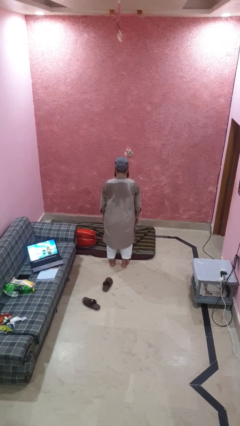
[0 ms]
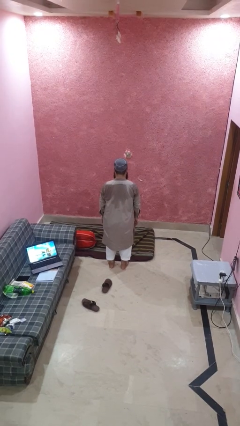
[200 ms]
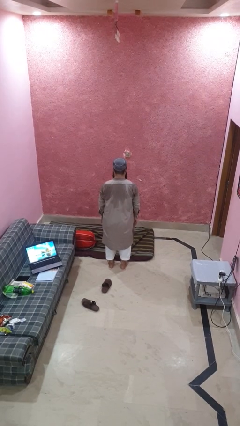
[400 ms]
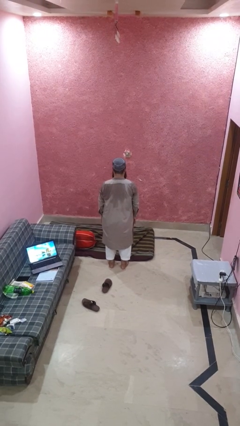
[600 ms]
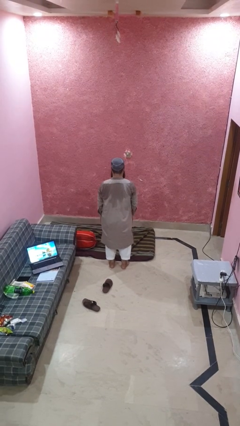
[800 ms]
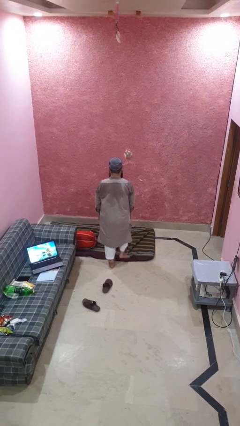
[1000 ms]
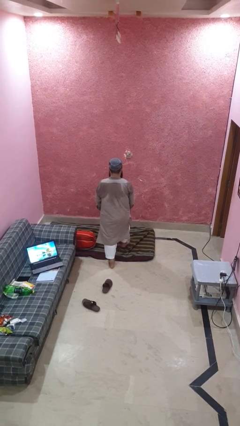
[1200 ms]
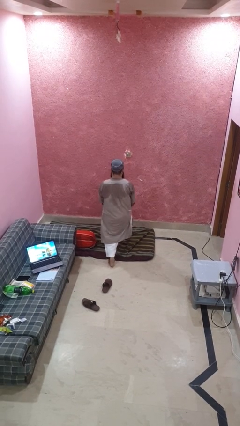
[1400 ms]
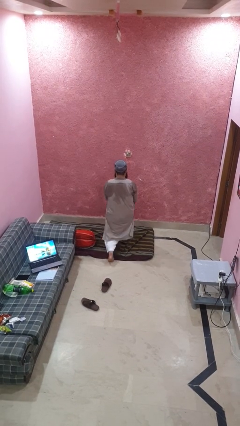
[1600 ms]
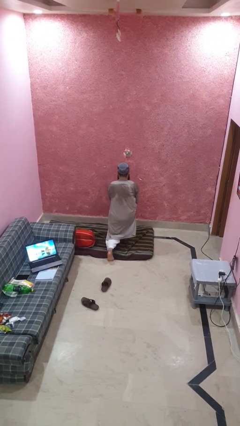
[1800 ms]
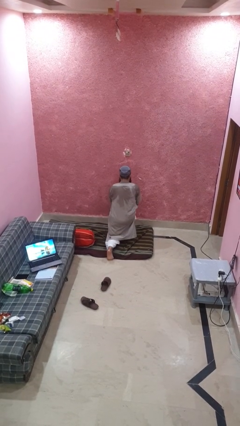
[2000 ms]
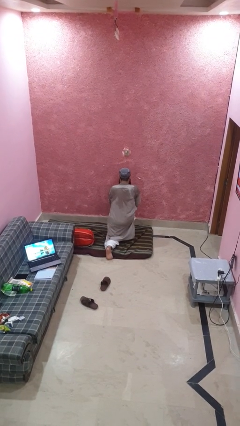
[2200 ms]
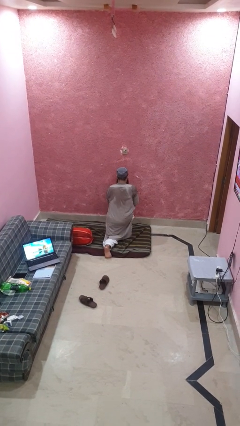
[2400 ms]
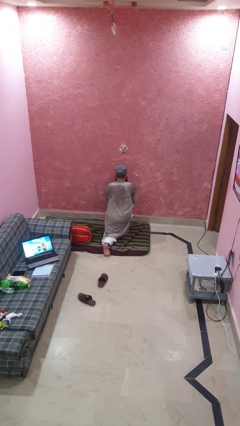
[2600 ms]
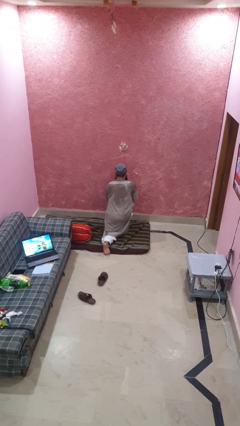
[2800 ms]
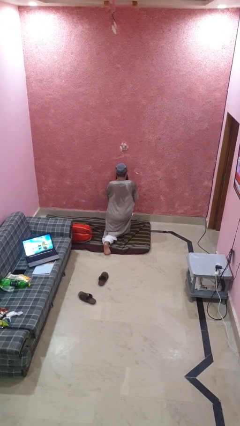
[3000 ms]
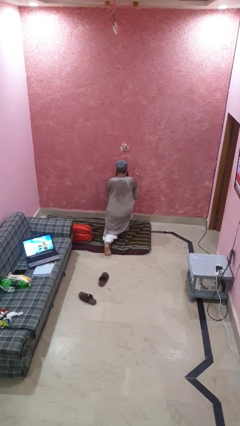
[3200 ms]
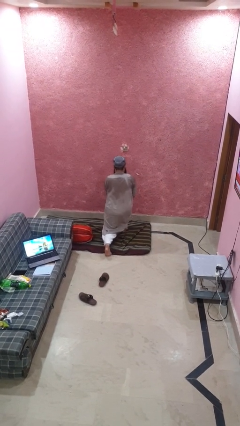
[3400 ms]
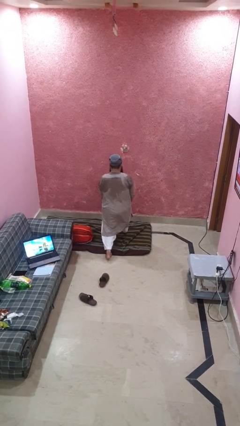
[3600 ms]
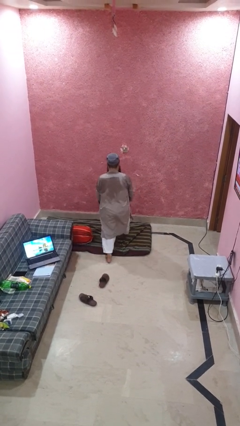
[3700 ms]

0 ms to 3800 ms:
person exercises with lunges

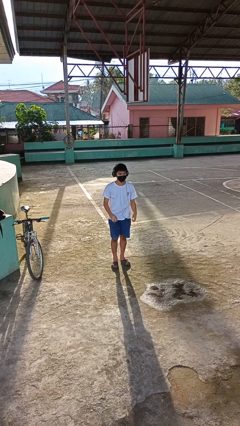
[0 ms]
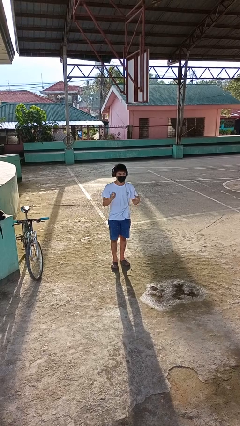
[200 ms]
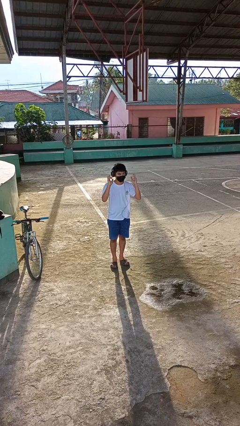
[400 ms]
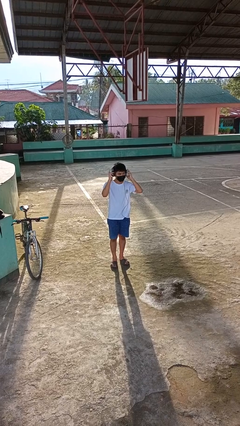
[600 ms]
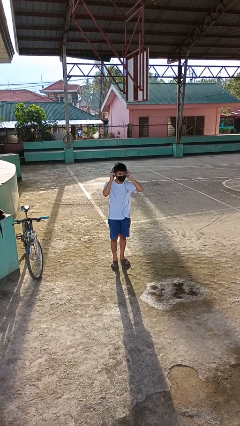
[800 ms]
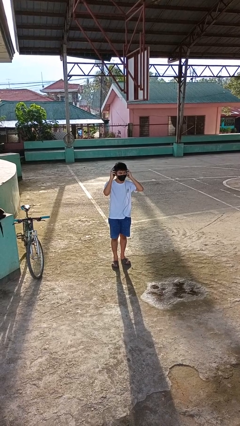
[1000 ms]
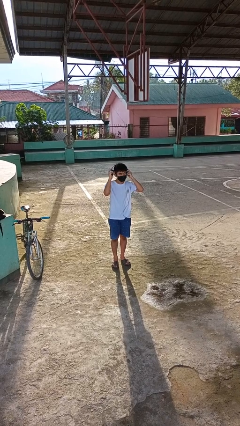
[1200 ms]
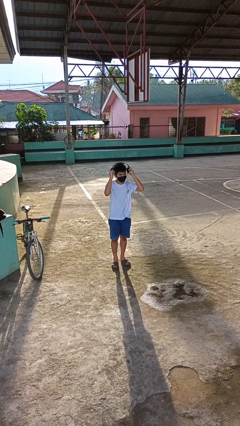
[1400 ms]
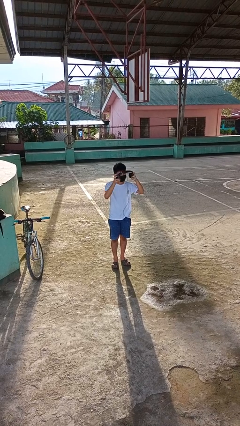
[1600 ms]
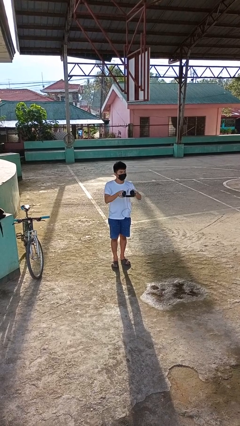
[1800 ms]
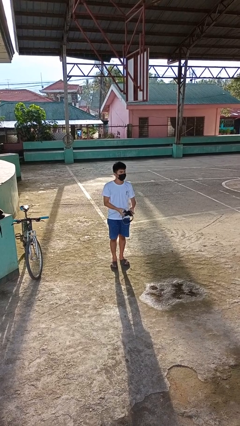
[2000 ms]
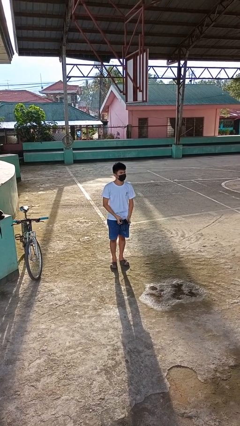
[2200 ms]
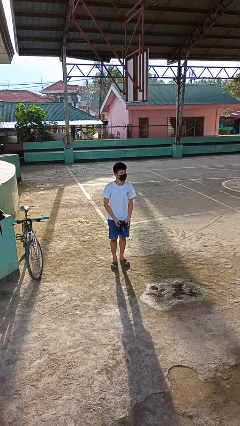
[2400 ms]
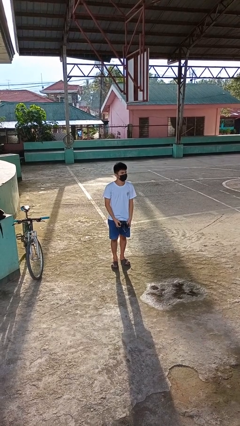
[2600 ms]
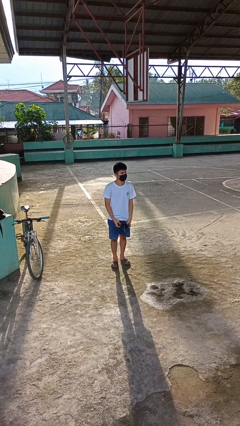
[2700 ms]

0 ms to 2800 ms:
person takes off headphones

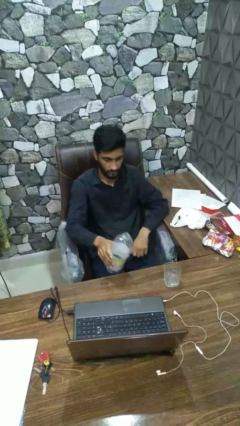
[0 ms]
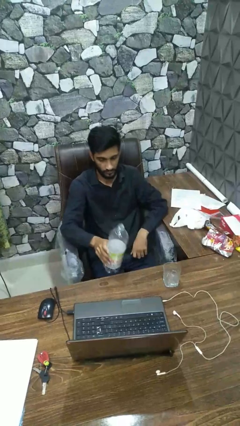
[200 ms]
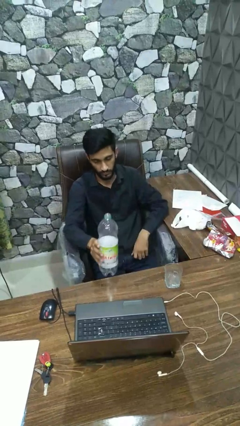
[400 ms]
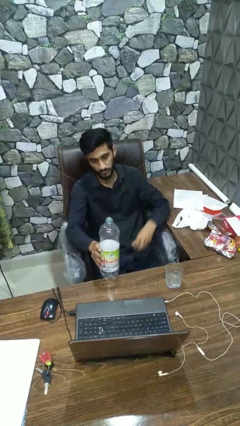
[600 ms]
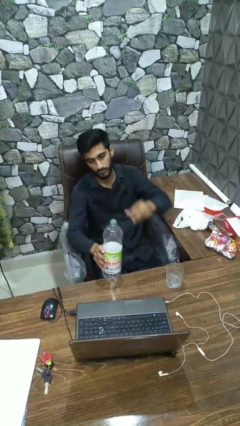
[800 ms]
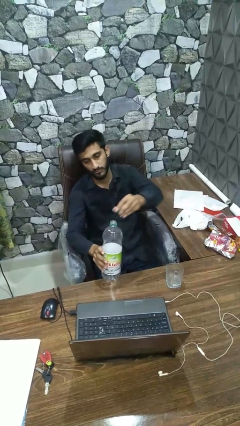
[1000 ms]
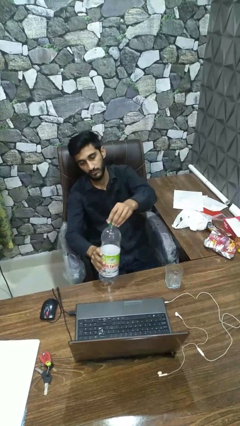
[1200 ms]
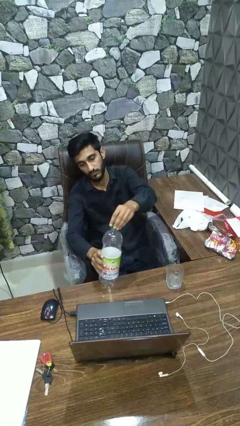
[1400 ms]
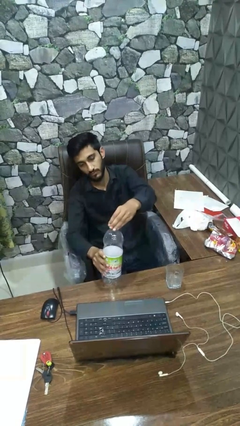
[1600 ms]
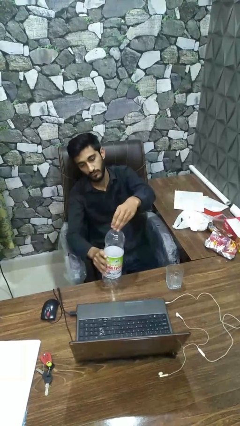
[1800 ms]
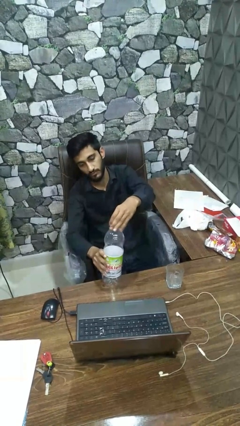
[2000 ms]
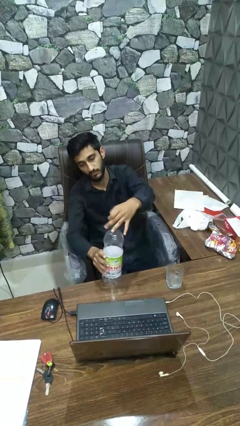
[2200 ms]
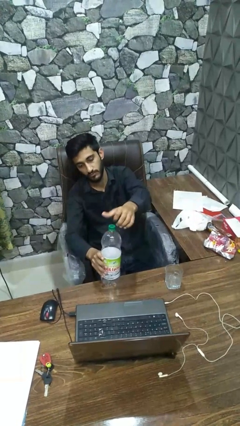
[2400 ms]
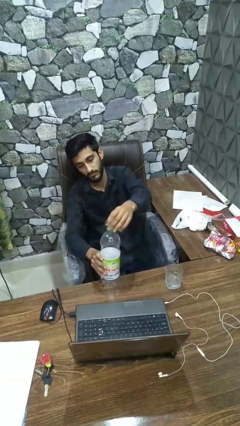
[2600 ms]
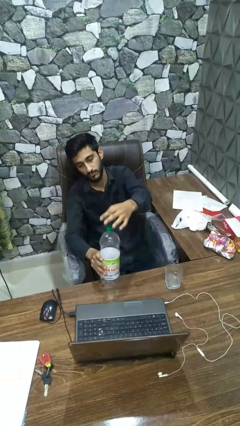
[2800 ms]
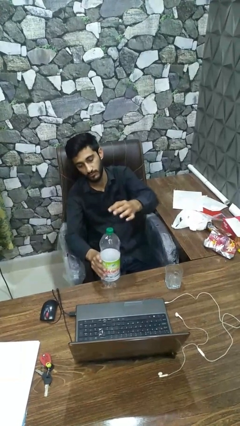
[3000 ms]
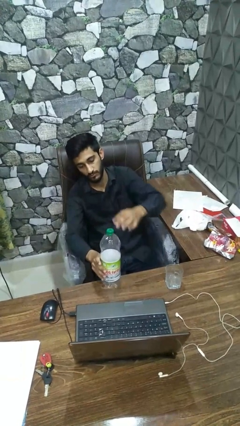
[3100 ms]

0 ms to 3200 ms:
person screws lid to bottle

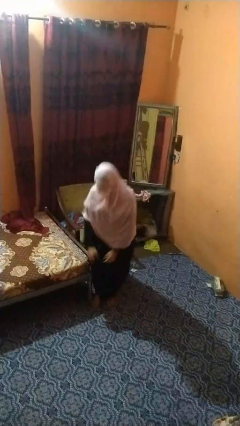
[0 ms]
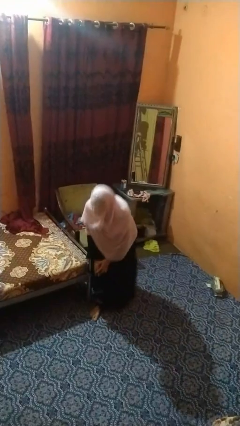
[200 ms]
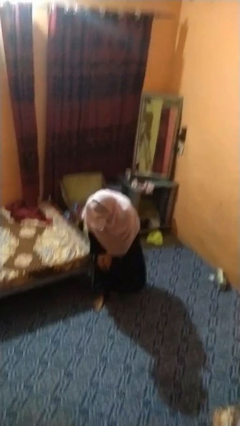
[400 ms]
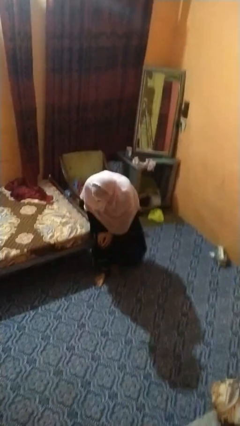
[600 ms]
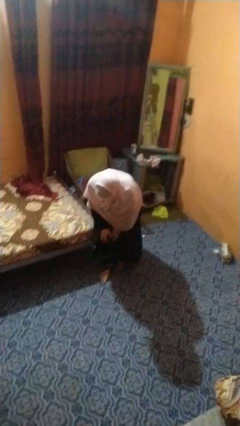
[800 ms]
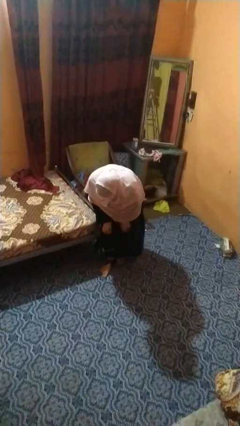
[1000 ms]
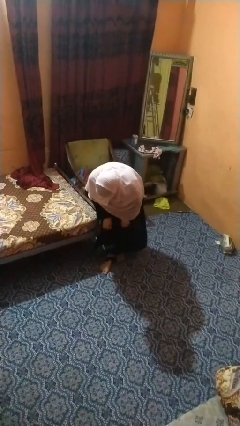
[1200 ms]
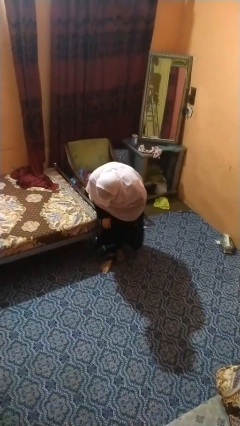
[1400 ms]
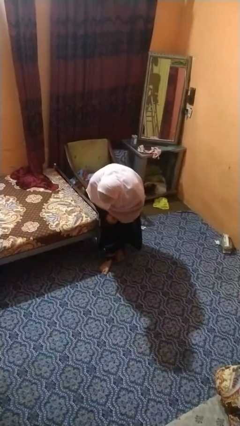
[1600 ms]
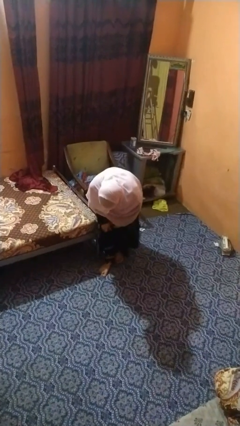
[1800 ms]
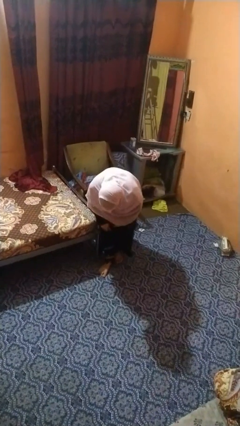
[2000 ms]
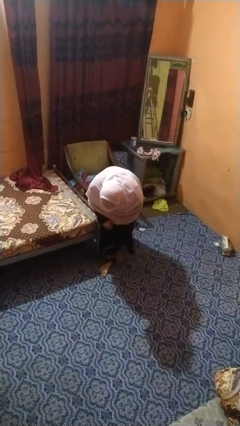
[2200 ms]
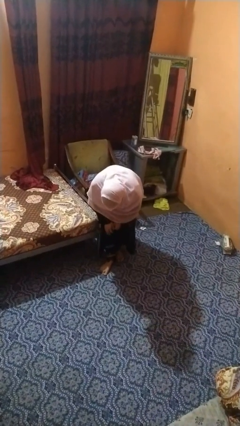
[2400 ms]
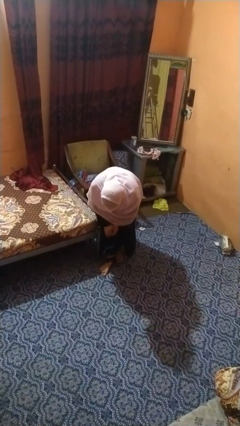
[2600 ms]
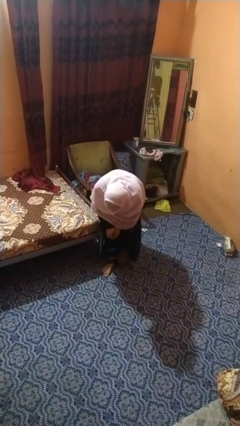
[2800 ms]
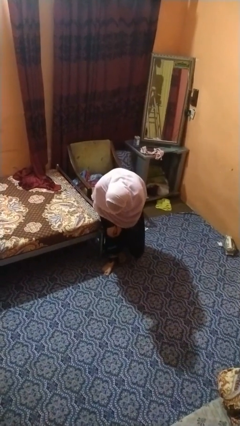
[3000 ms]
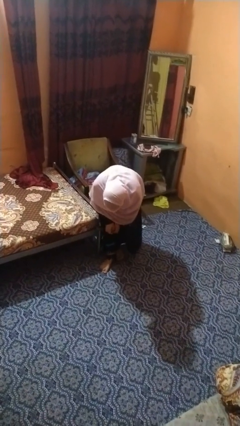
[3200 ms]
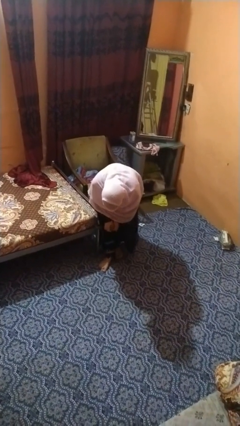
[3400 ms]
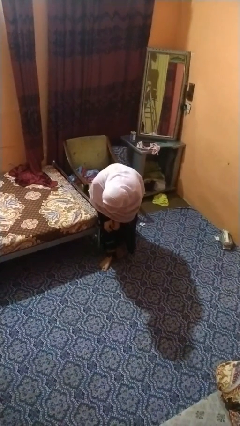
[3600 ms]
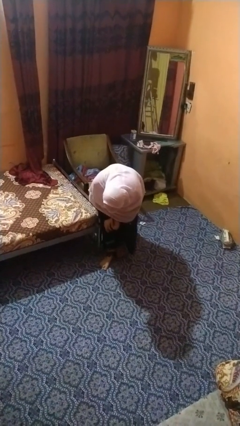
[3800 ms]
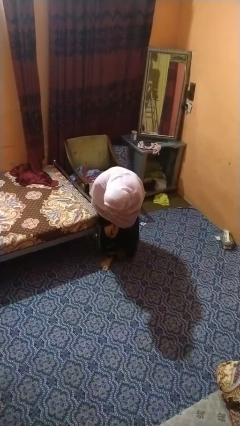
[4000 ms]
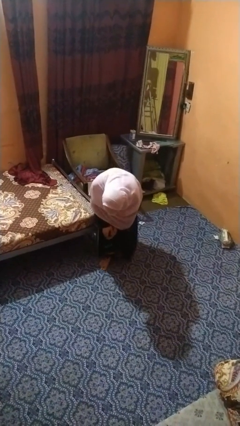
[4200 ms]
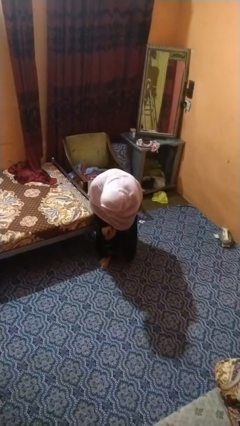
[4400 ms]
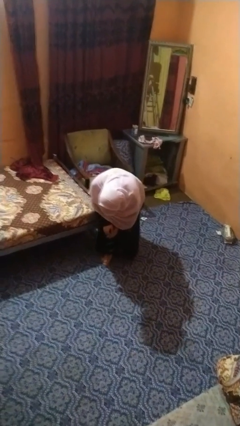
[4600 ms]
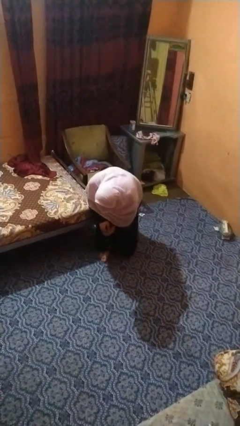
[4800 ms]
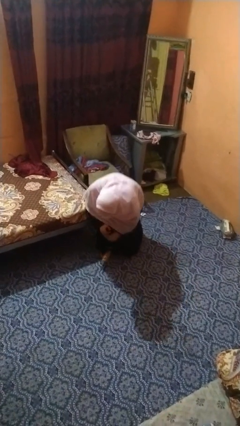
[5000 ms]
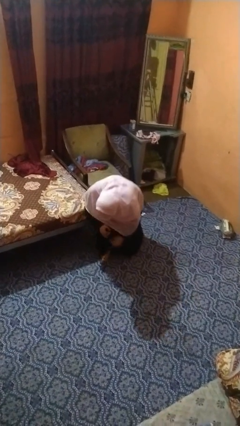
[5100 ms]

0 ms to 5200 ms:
person trips on object on floor

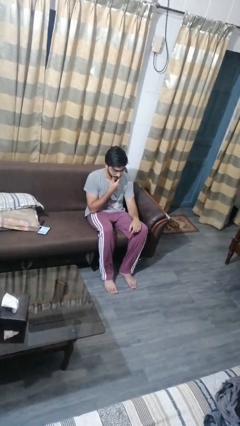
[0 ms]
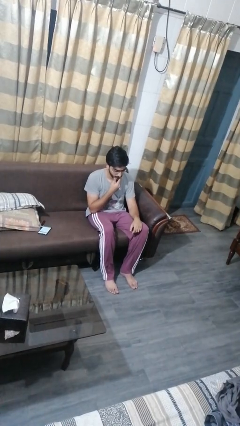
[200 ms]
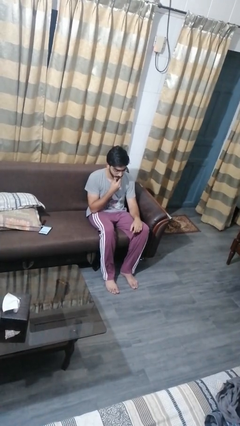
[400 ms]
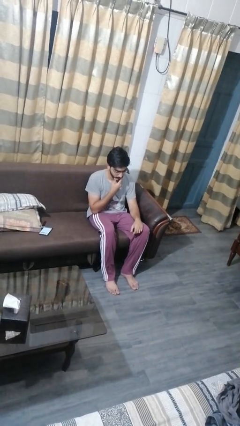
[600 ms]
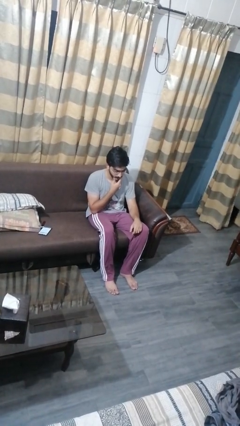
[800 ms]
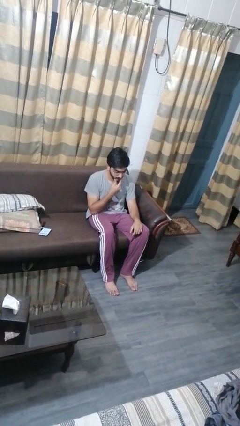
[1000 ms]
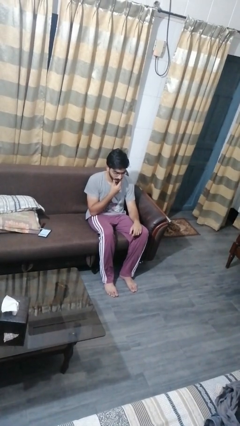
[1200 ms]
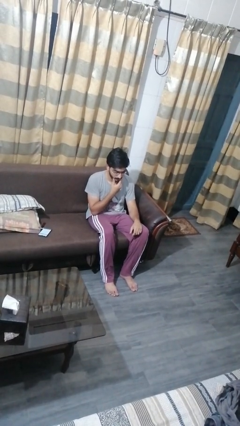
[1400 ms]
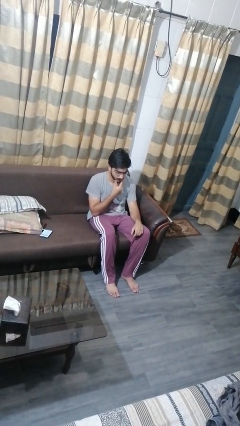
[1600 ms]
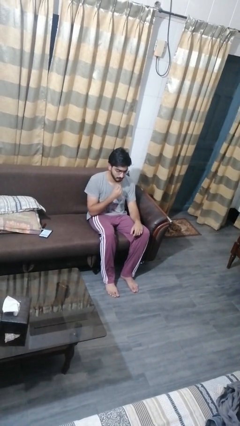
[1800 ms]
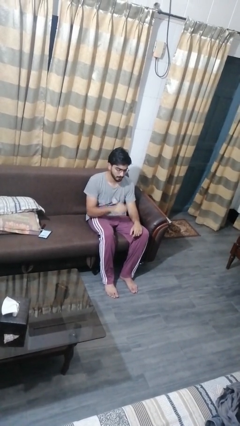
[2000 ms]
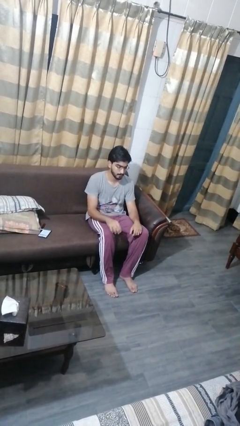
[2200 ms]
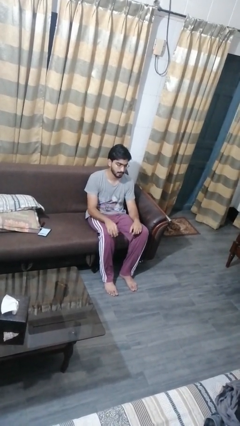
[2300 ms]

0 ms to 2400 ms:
person strokes chin

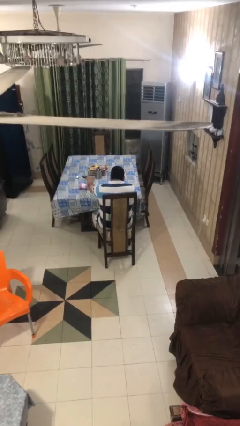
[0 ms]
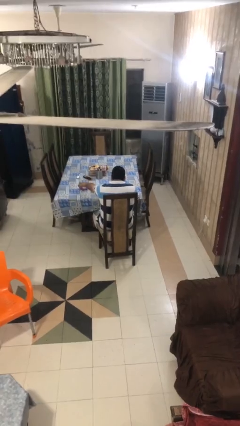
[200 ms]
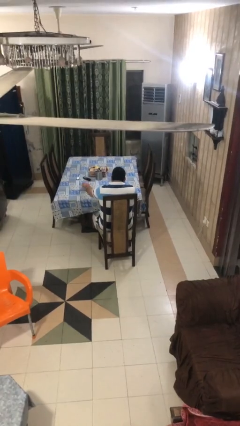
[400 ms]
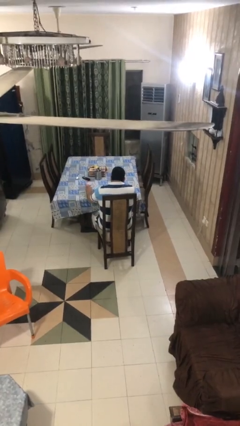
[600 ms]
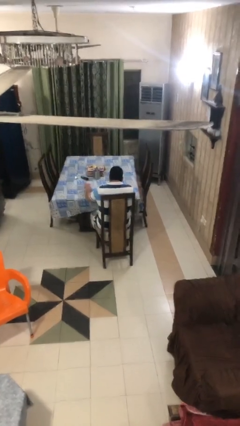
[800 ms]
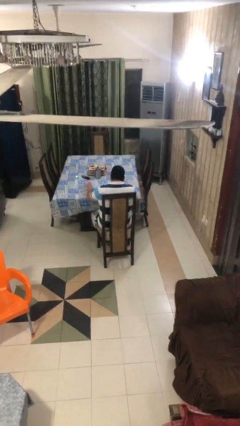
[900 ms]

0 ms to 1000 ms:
person sets upright glass
